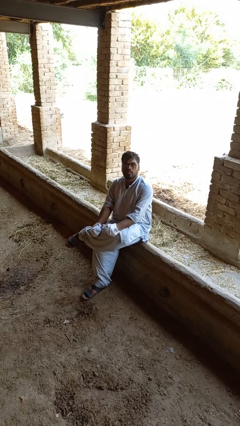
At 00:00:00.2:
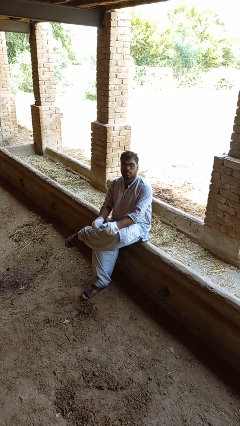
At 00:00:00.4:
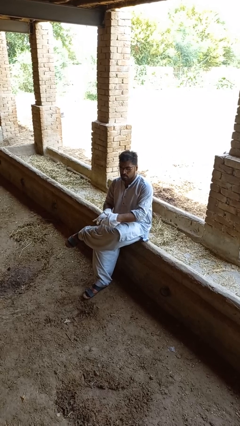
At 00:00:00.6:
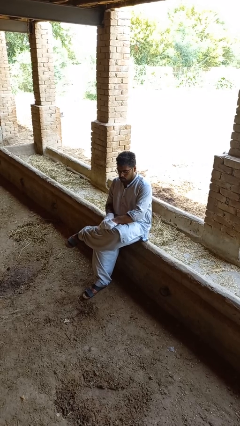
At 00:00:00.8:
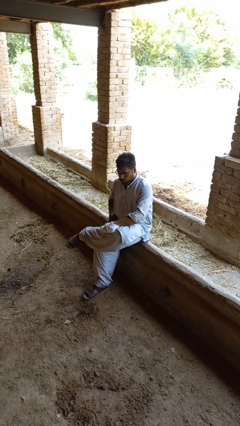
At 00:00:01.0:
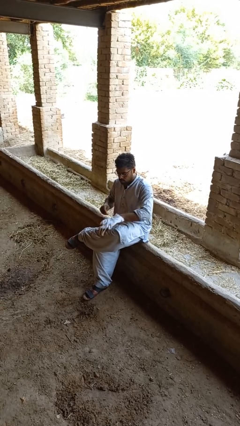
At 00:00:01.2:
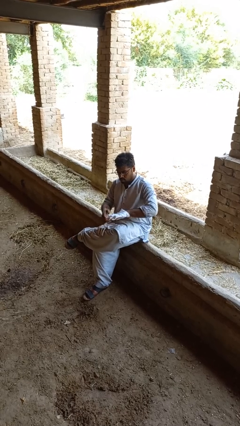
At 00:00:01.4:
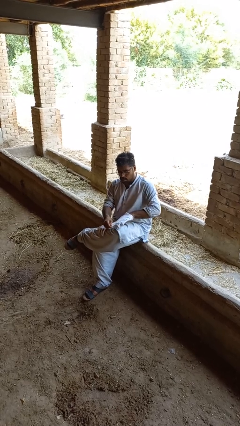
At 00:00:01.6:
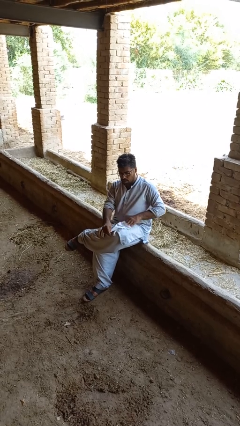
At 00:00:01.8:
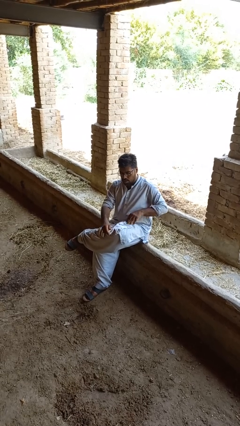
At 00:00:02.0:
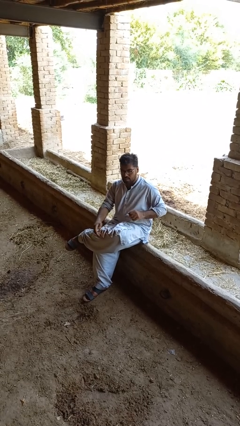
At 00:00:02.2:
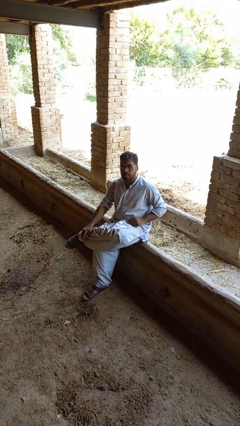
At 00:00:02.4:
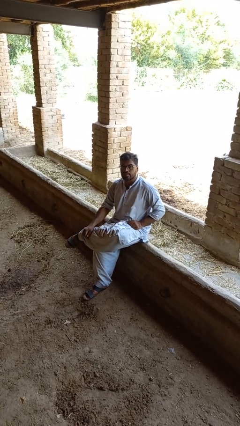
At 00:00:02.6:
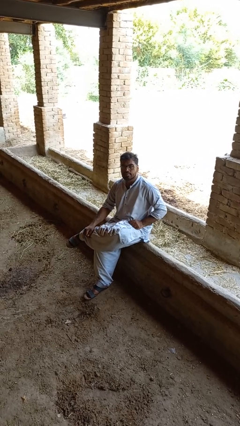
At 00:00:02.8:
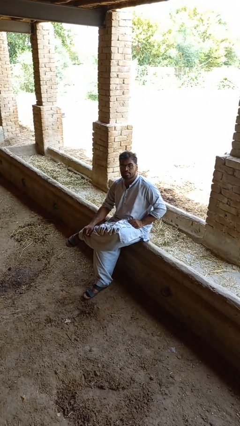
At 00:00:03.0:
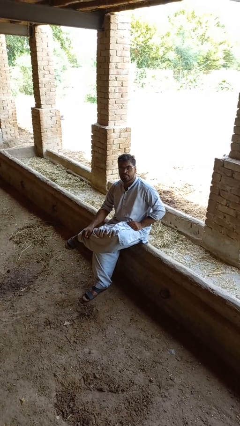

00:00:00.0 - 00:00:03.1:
person takes off gloves

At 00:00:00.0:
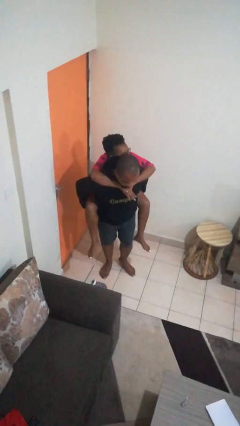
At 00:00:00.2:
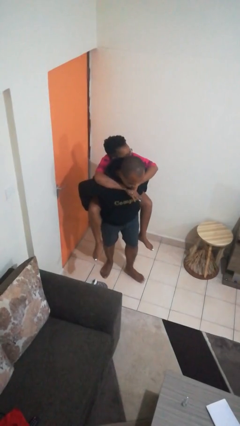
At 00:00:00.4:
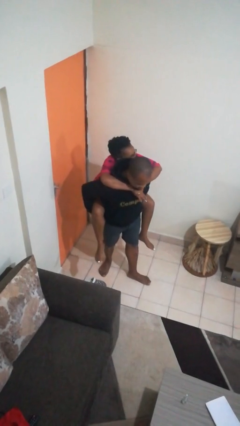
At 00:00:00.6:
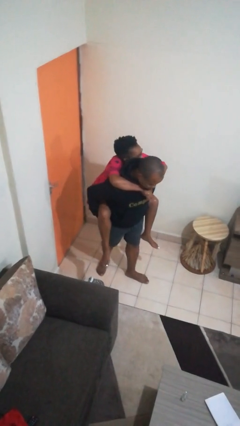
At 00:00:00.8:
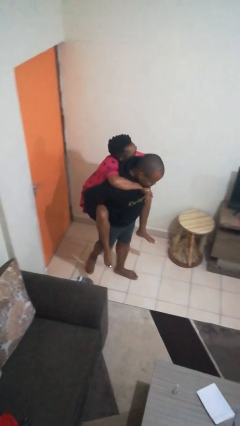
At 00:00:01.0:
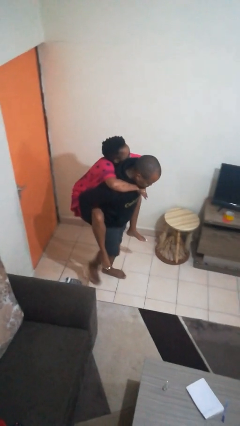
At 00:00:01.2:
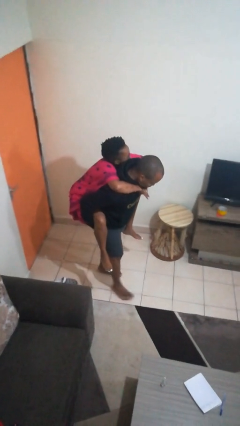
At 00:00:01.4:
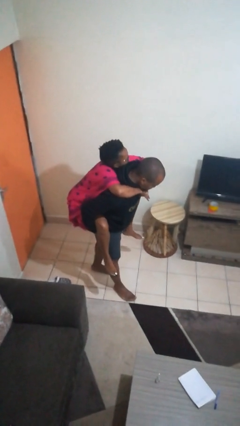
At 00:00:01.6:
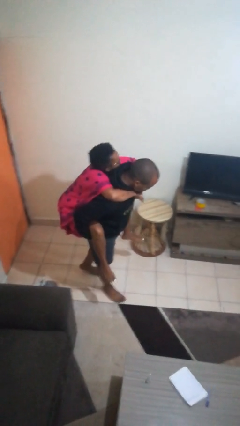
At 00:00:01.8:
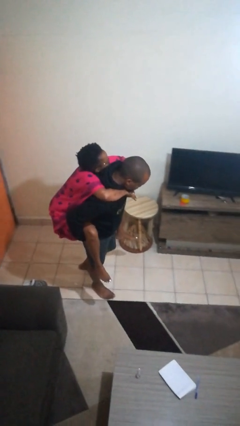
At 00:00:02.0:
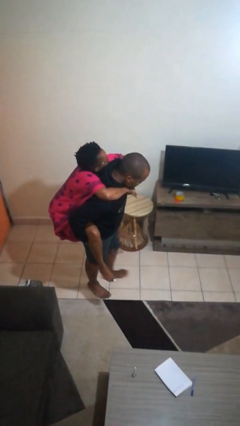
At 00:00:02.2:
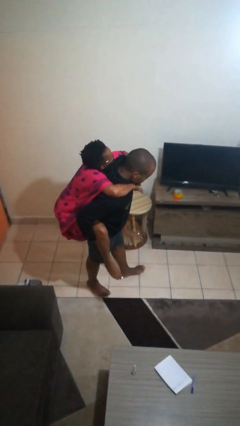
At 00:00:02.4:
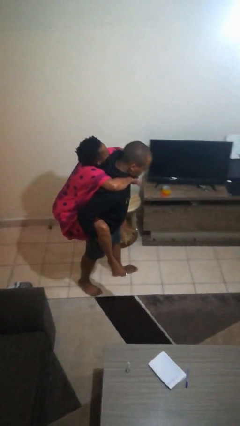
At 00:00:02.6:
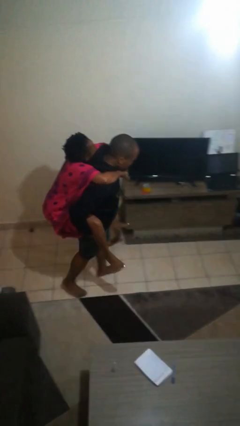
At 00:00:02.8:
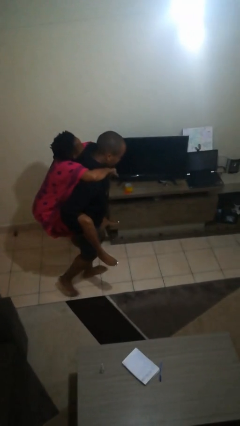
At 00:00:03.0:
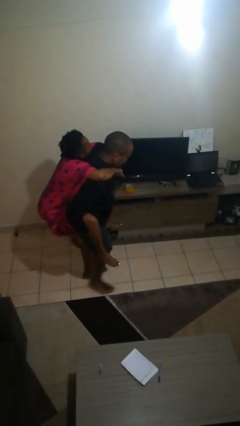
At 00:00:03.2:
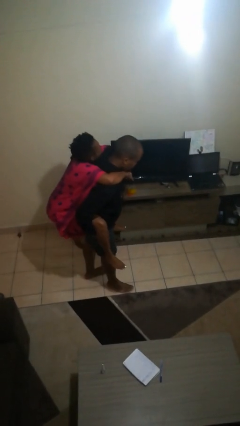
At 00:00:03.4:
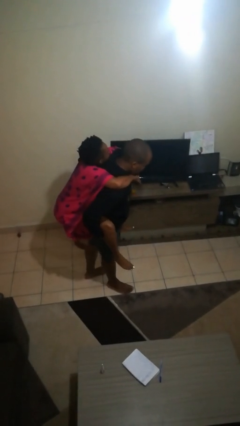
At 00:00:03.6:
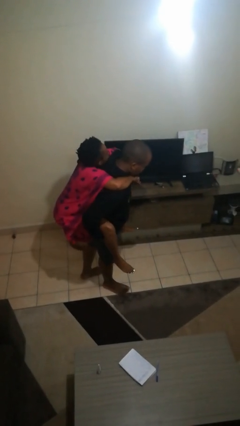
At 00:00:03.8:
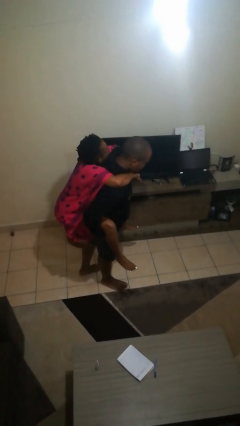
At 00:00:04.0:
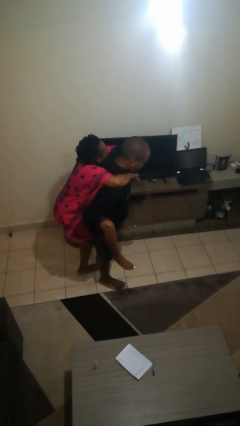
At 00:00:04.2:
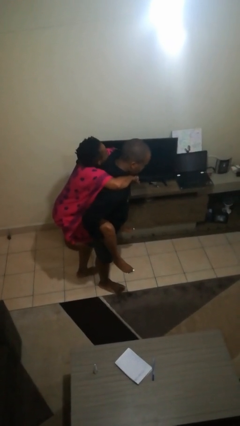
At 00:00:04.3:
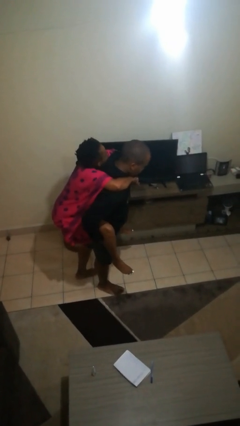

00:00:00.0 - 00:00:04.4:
person carries person on back

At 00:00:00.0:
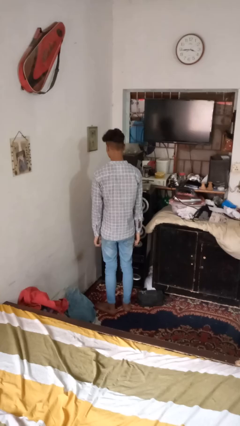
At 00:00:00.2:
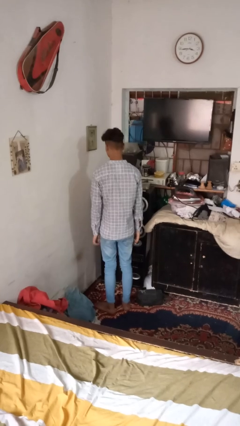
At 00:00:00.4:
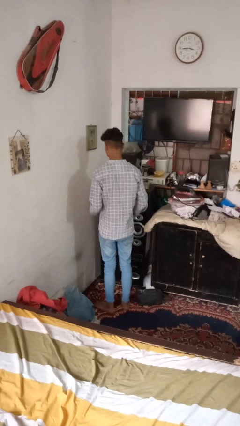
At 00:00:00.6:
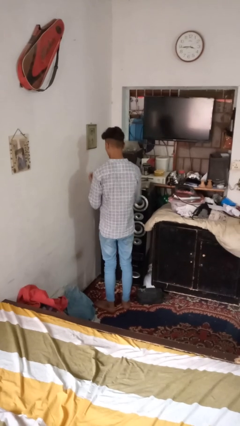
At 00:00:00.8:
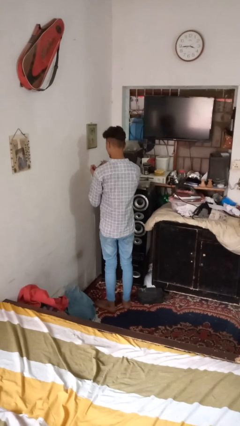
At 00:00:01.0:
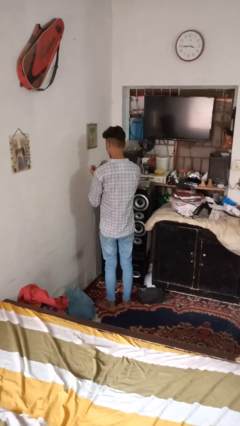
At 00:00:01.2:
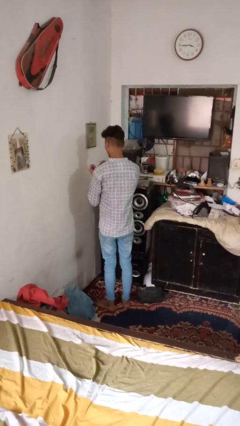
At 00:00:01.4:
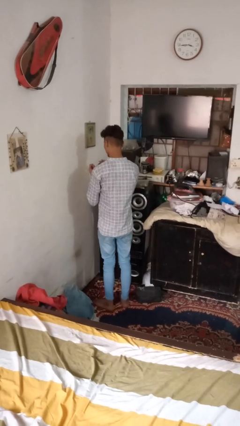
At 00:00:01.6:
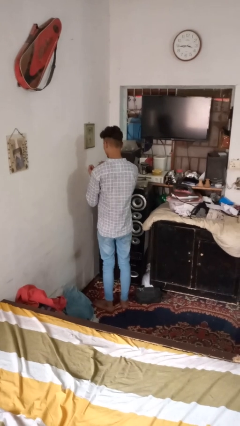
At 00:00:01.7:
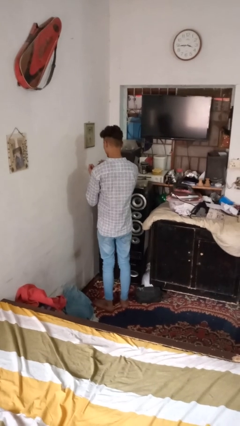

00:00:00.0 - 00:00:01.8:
person clips fingernails

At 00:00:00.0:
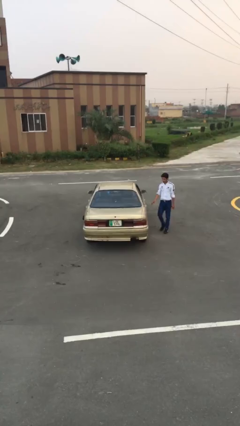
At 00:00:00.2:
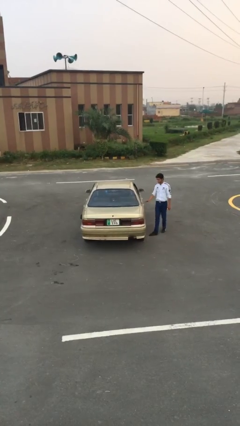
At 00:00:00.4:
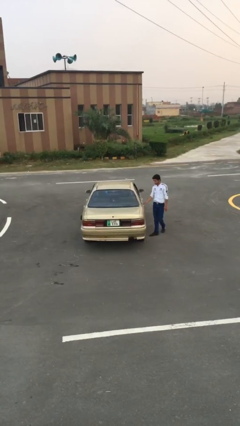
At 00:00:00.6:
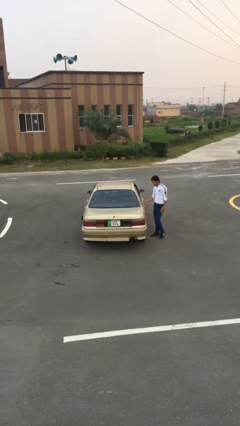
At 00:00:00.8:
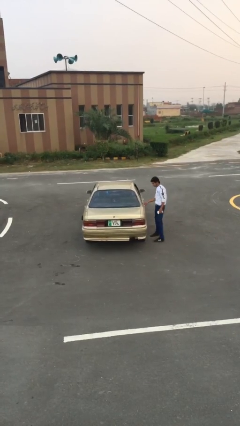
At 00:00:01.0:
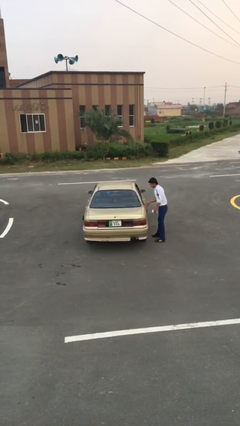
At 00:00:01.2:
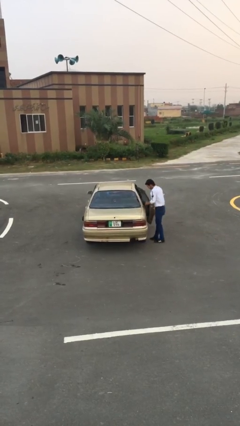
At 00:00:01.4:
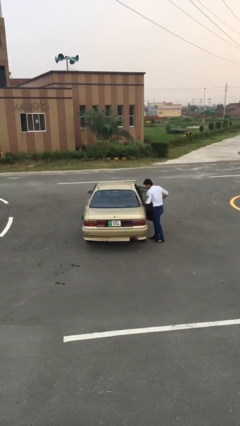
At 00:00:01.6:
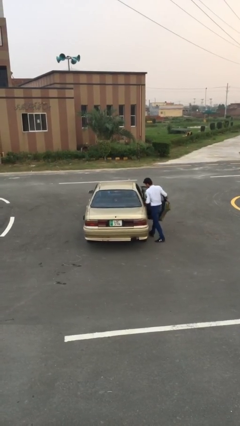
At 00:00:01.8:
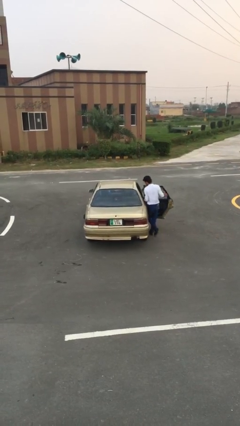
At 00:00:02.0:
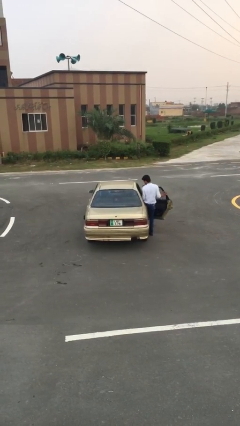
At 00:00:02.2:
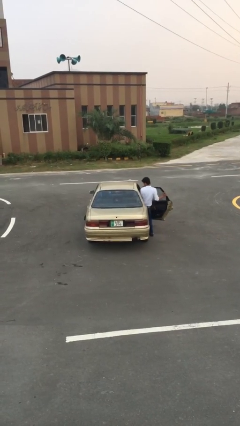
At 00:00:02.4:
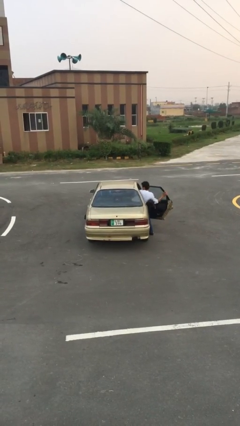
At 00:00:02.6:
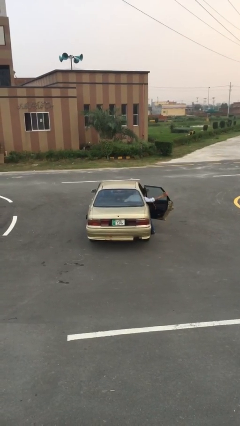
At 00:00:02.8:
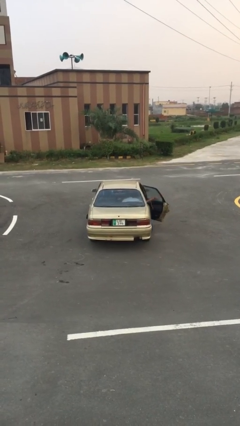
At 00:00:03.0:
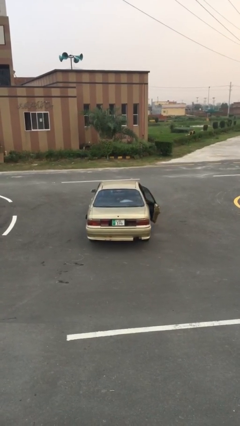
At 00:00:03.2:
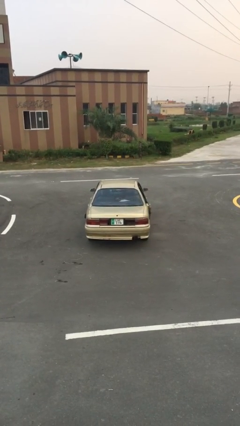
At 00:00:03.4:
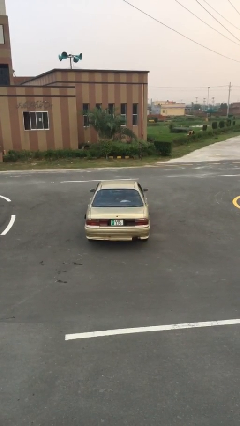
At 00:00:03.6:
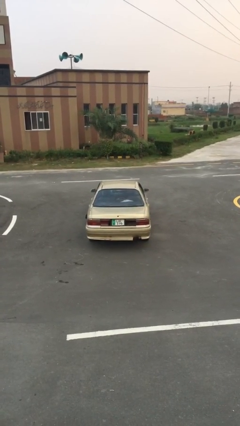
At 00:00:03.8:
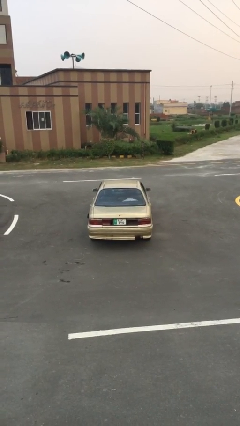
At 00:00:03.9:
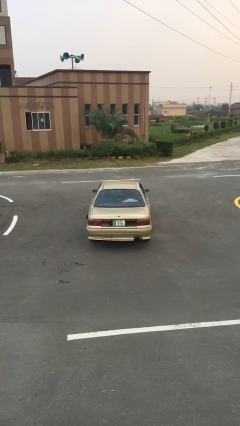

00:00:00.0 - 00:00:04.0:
car picks up person

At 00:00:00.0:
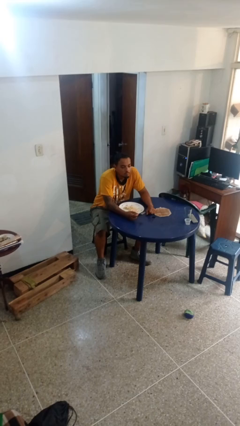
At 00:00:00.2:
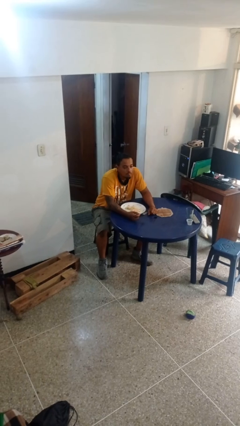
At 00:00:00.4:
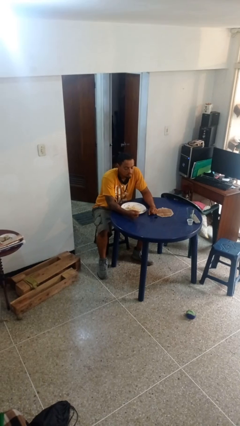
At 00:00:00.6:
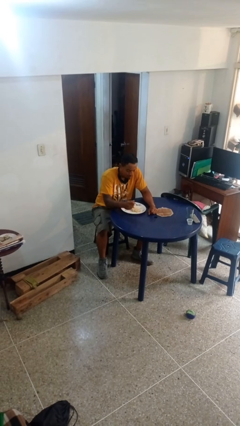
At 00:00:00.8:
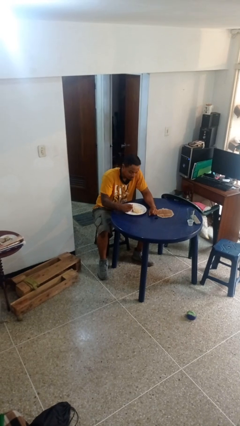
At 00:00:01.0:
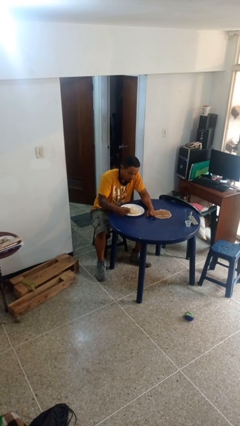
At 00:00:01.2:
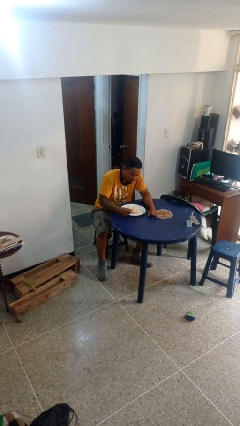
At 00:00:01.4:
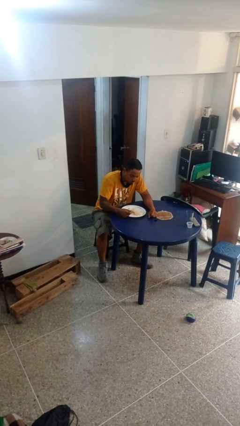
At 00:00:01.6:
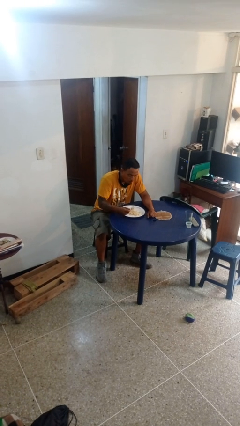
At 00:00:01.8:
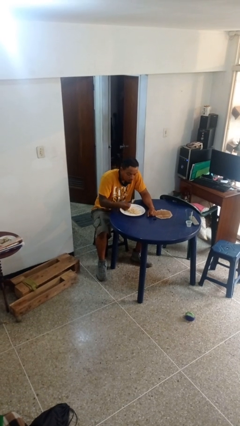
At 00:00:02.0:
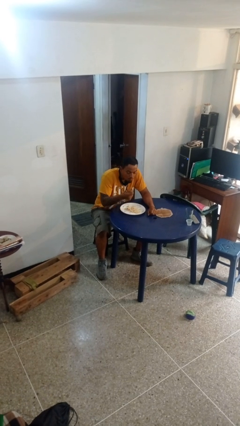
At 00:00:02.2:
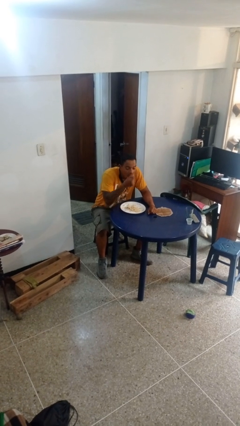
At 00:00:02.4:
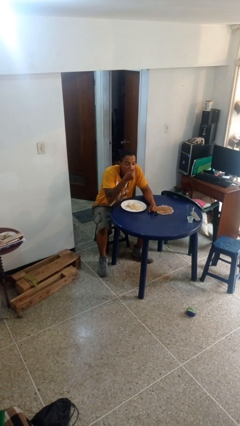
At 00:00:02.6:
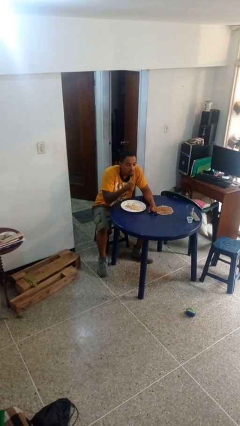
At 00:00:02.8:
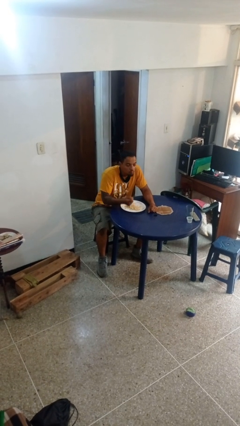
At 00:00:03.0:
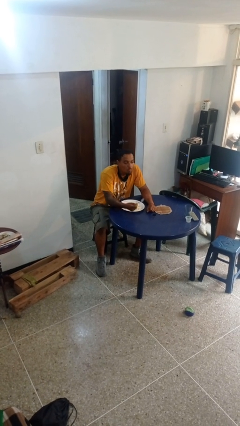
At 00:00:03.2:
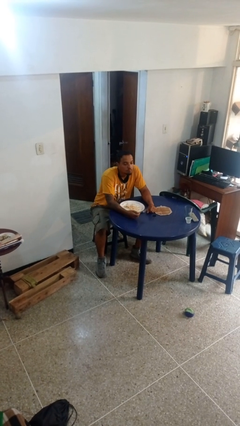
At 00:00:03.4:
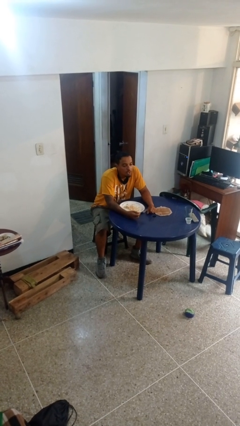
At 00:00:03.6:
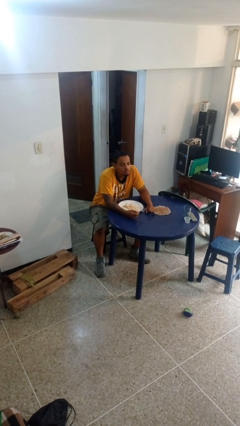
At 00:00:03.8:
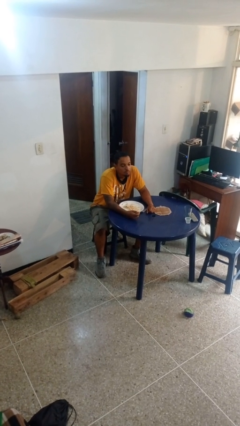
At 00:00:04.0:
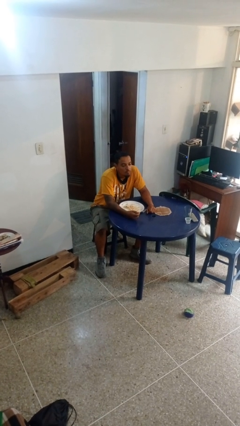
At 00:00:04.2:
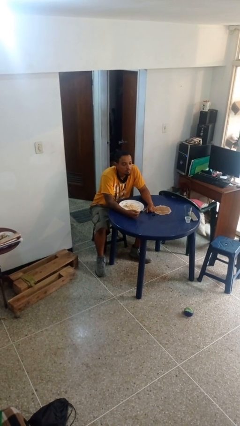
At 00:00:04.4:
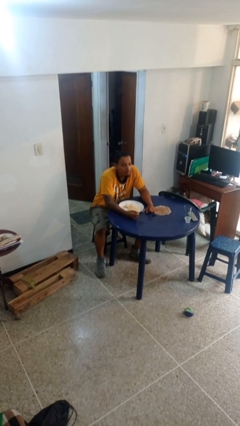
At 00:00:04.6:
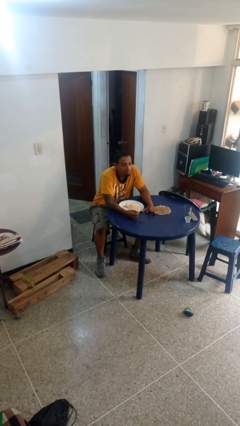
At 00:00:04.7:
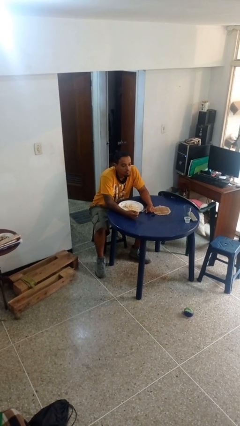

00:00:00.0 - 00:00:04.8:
person eats with utensil
